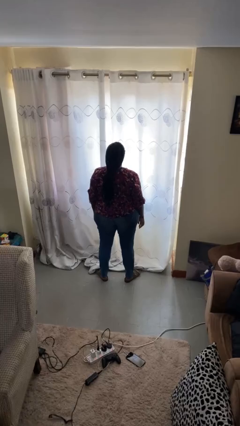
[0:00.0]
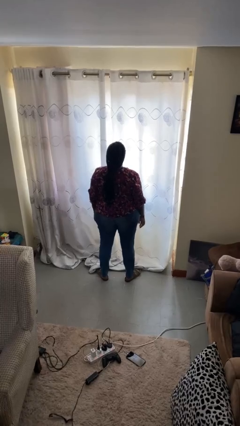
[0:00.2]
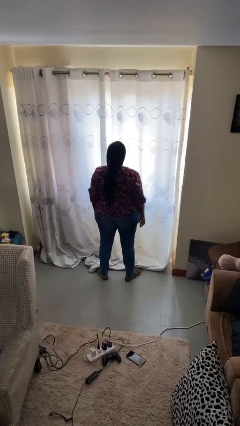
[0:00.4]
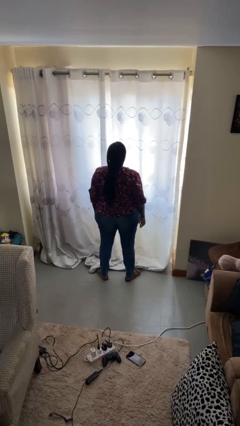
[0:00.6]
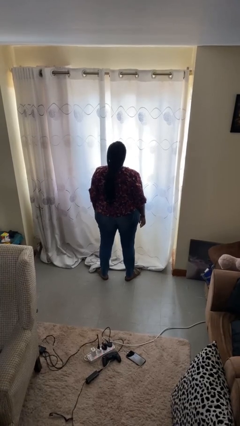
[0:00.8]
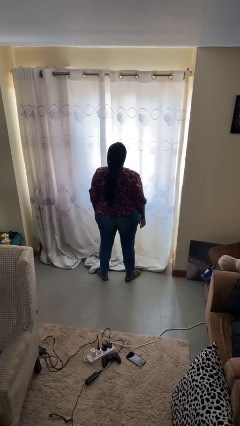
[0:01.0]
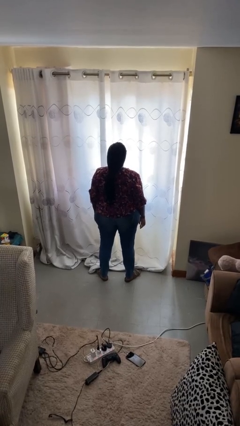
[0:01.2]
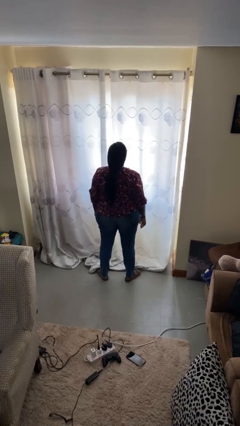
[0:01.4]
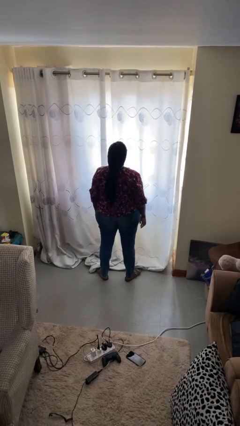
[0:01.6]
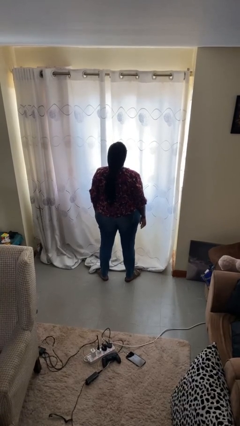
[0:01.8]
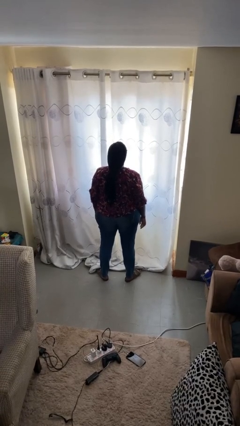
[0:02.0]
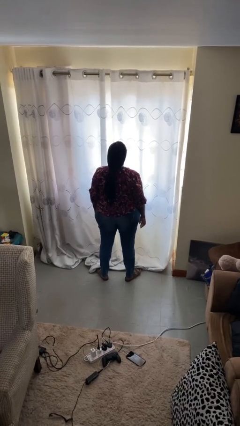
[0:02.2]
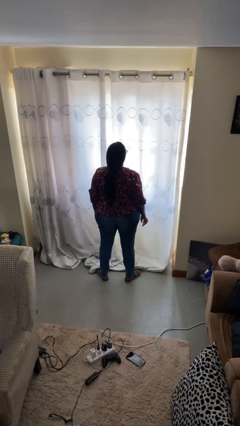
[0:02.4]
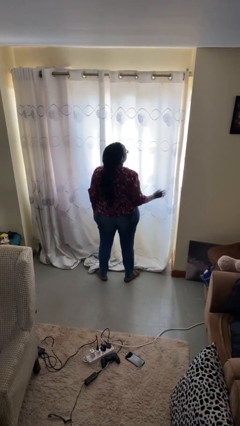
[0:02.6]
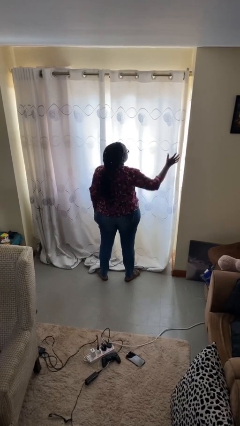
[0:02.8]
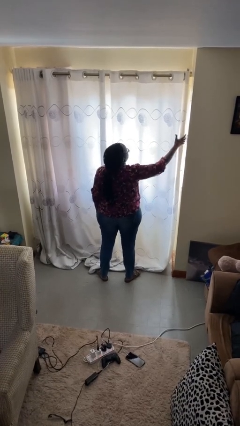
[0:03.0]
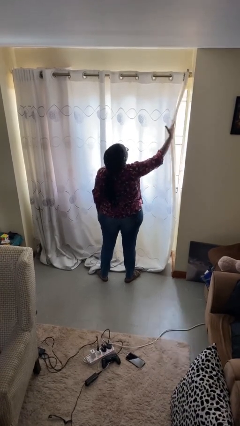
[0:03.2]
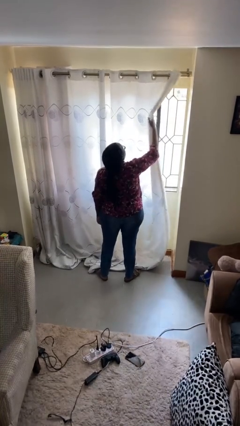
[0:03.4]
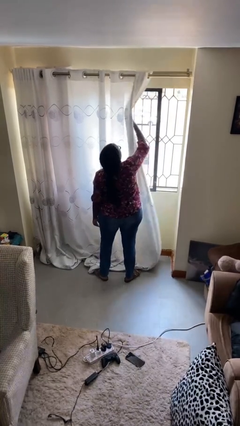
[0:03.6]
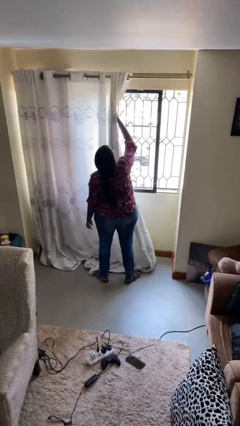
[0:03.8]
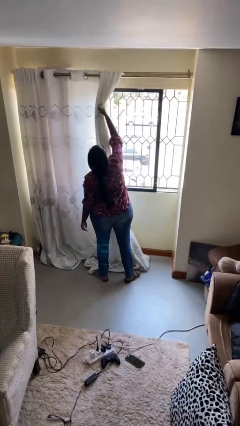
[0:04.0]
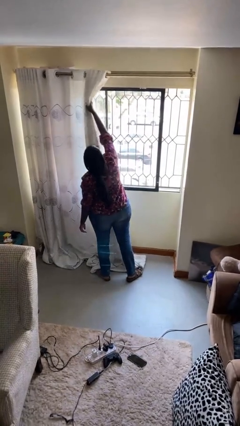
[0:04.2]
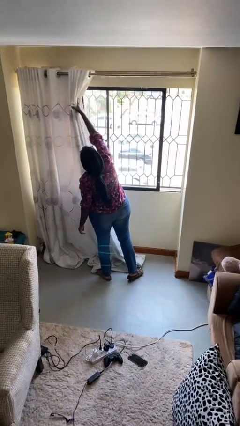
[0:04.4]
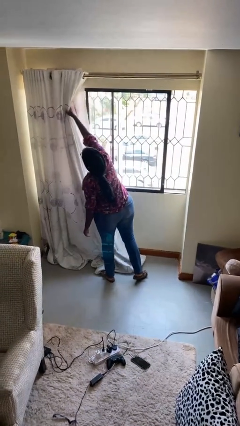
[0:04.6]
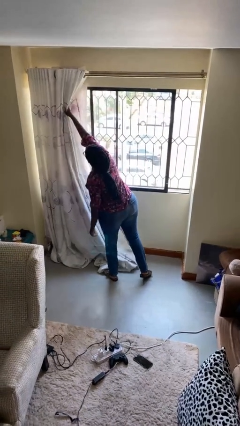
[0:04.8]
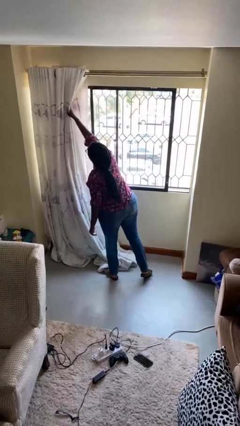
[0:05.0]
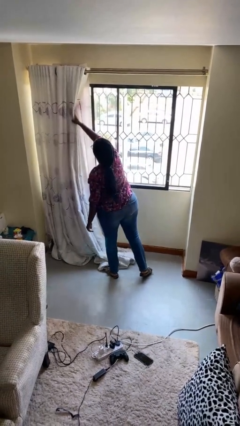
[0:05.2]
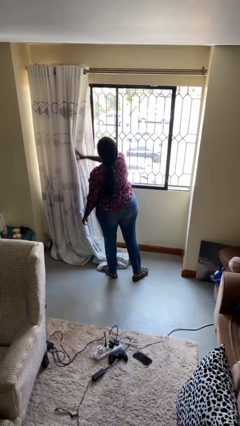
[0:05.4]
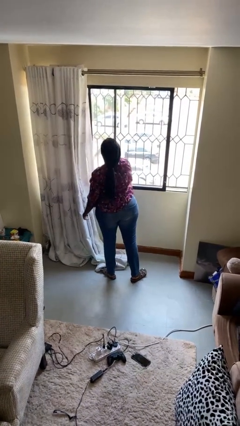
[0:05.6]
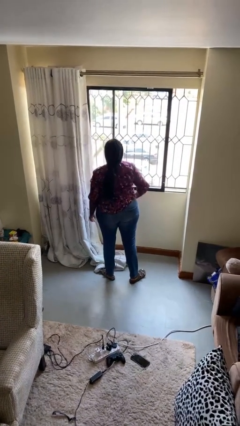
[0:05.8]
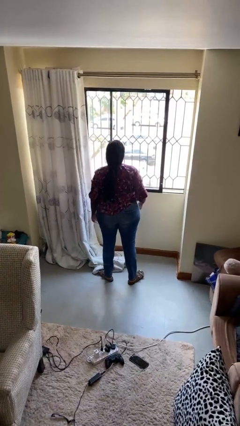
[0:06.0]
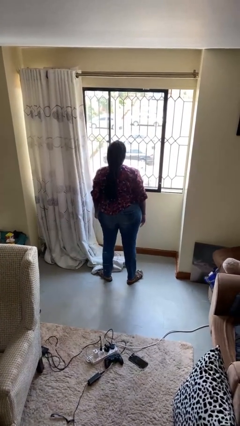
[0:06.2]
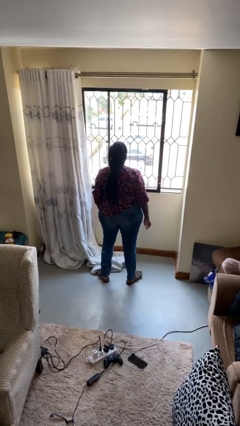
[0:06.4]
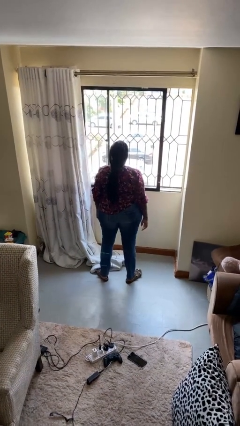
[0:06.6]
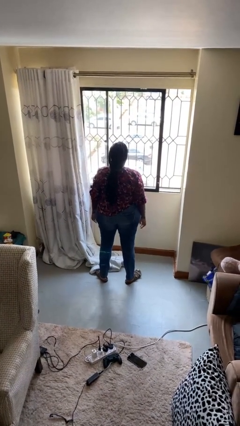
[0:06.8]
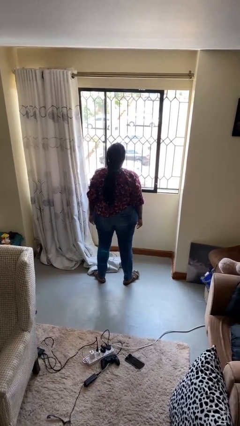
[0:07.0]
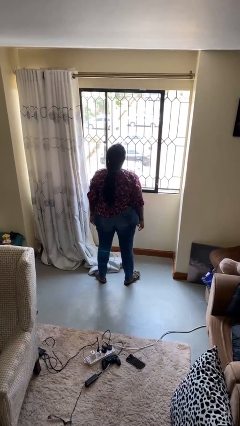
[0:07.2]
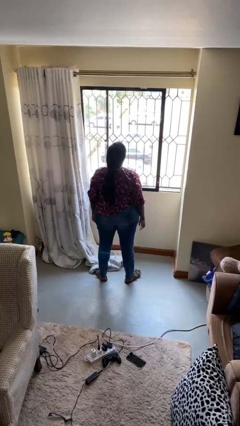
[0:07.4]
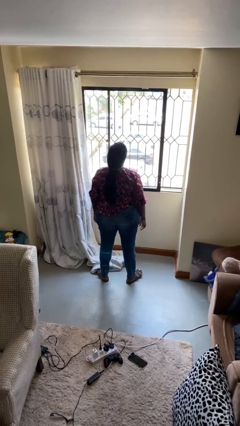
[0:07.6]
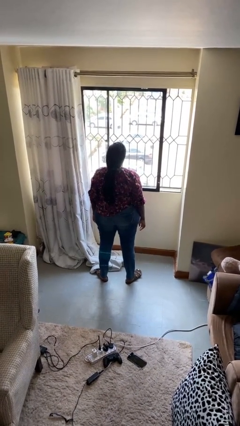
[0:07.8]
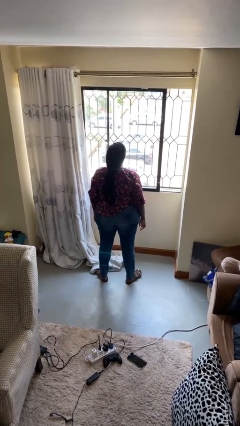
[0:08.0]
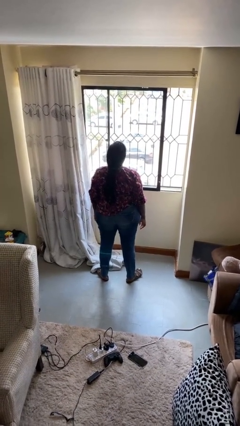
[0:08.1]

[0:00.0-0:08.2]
person opens curtains

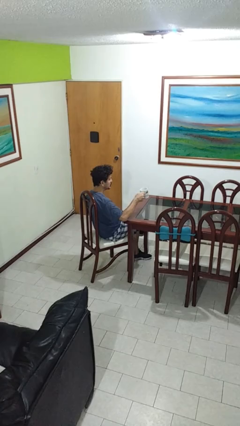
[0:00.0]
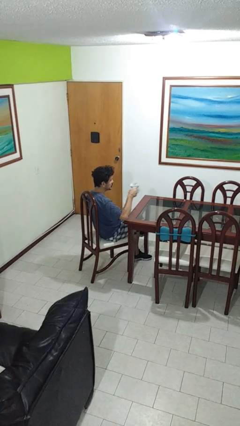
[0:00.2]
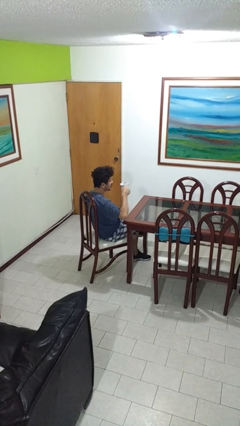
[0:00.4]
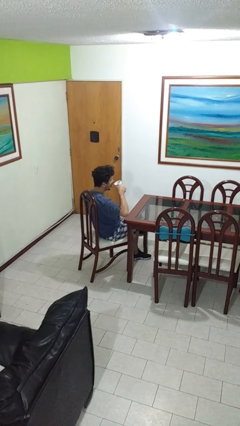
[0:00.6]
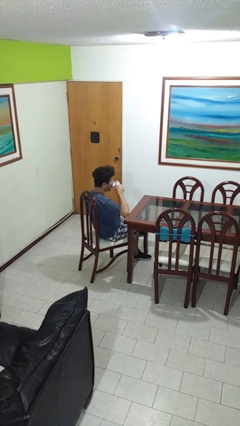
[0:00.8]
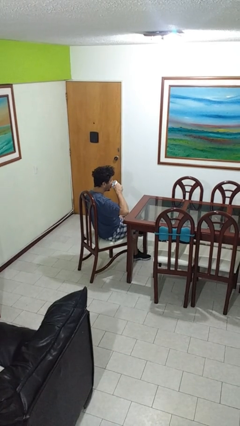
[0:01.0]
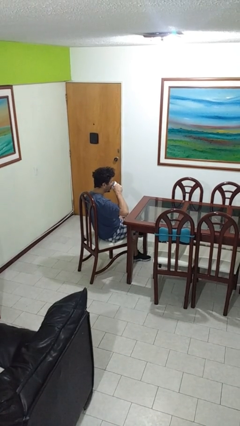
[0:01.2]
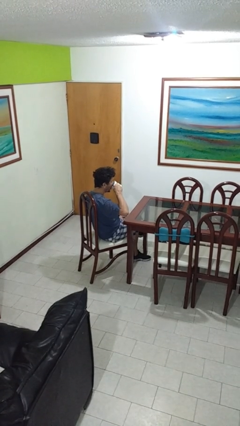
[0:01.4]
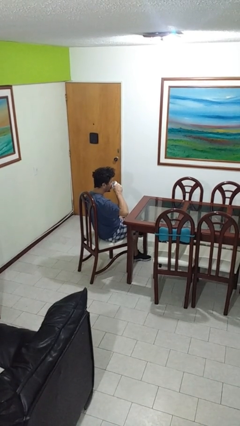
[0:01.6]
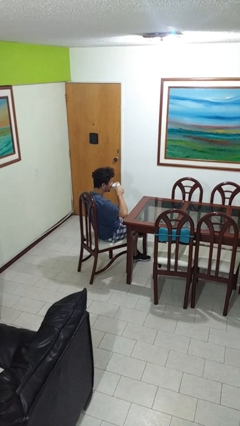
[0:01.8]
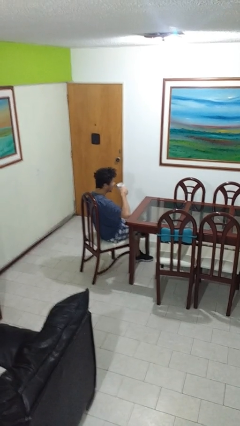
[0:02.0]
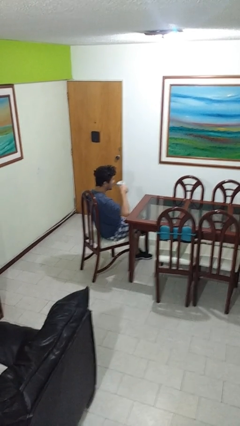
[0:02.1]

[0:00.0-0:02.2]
person drinks from mug

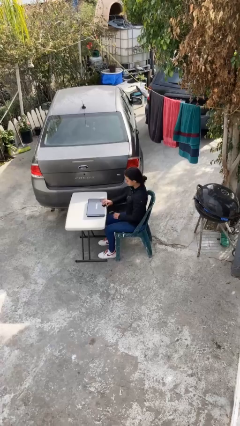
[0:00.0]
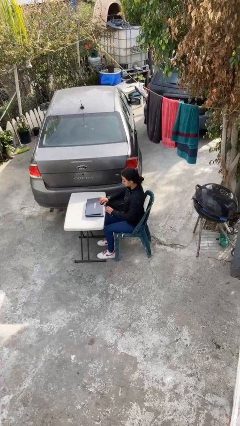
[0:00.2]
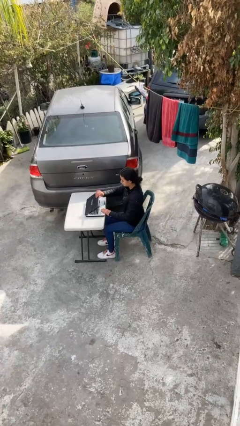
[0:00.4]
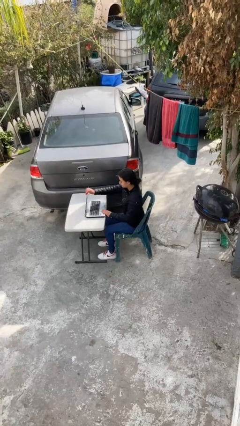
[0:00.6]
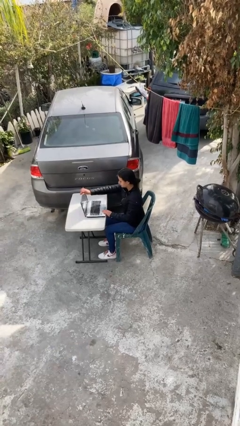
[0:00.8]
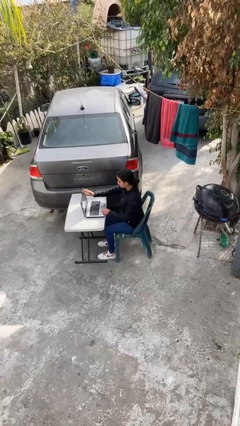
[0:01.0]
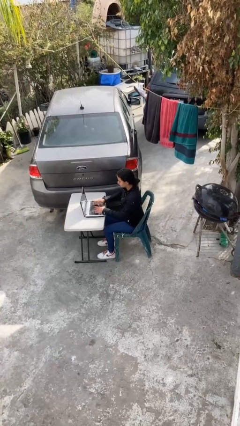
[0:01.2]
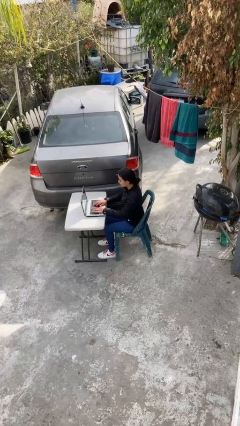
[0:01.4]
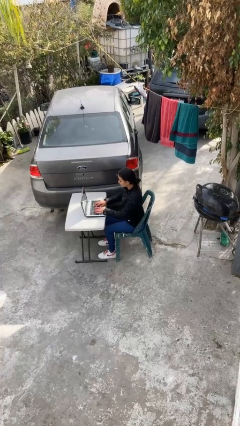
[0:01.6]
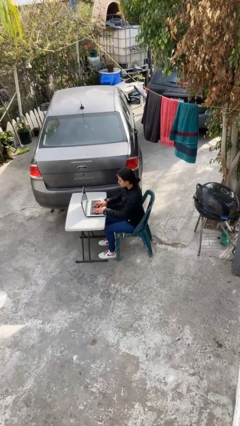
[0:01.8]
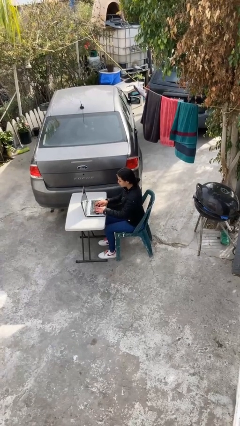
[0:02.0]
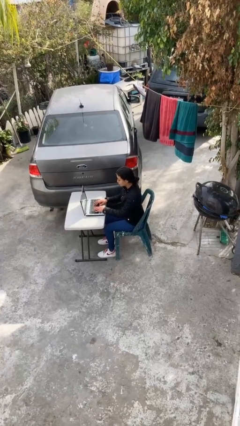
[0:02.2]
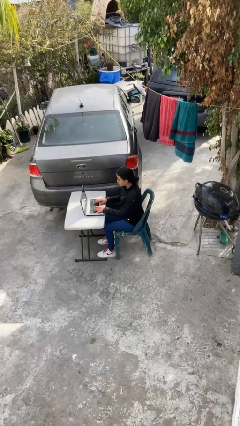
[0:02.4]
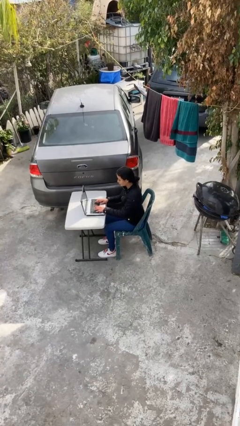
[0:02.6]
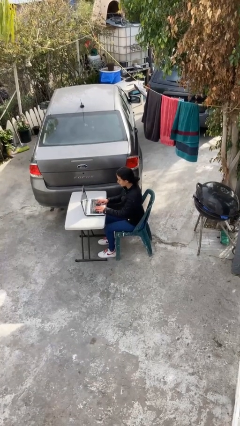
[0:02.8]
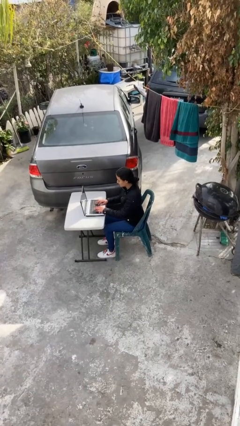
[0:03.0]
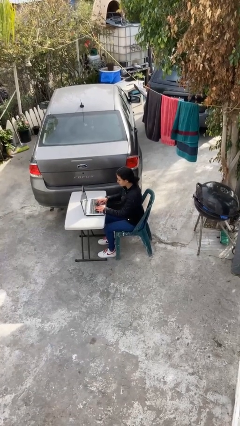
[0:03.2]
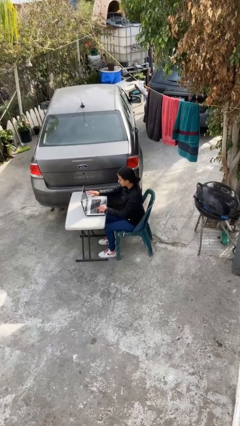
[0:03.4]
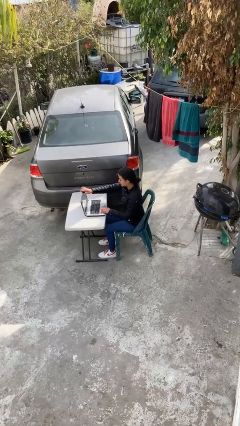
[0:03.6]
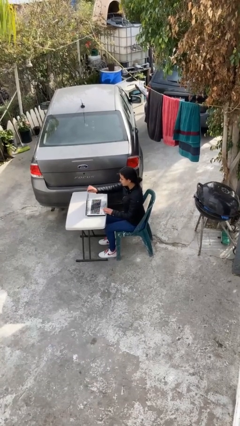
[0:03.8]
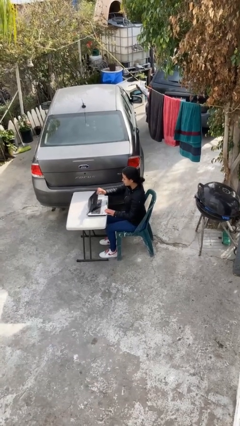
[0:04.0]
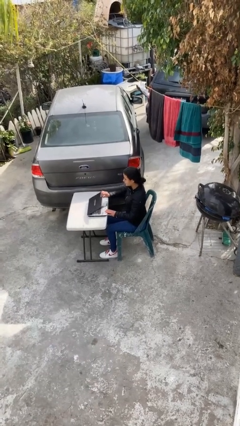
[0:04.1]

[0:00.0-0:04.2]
person interacts with laptop

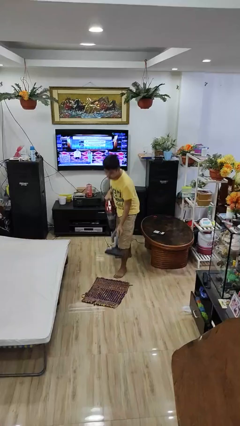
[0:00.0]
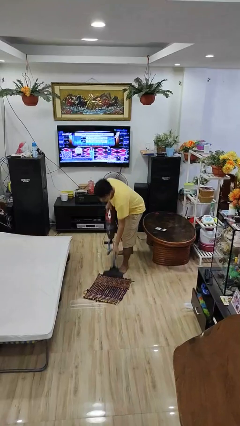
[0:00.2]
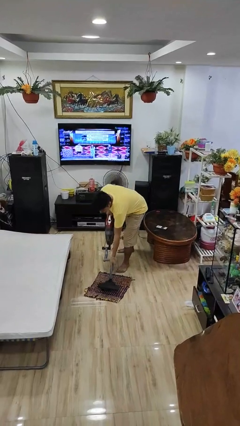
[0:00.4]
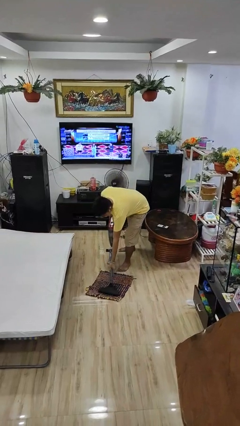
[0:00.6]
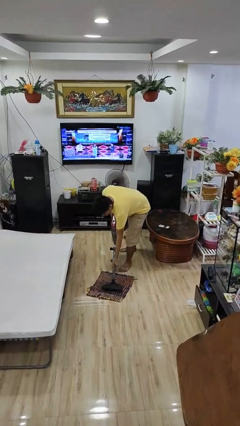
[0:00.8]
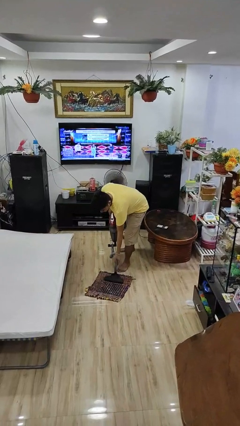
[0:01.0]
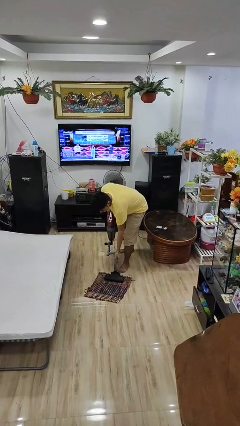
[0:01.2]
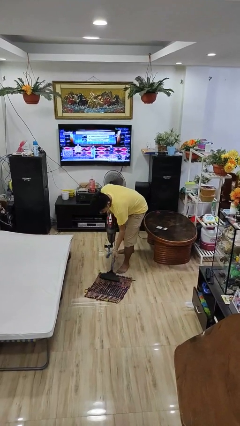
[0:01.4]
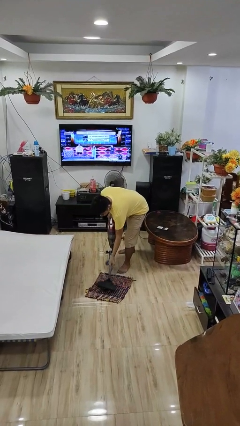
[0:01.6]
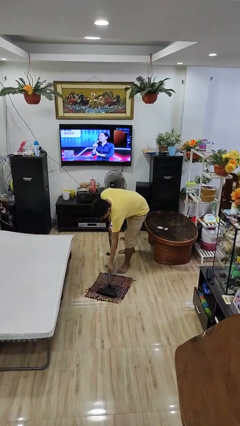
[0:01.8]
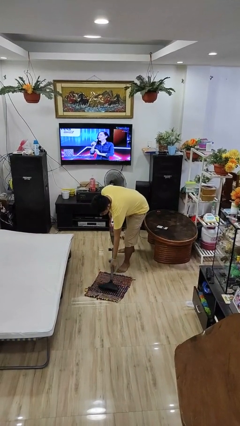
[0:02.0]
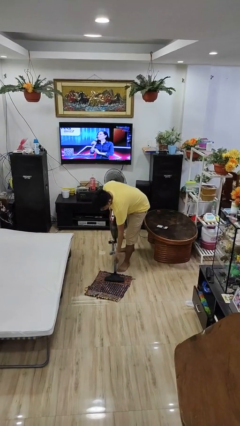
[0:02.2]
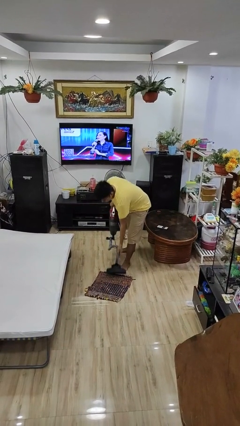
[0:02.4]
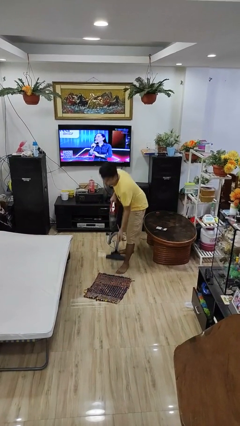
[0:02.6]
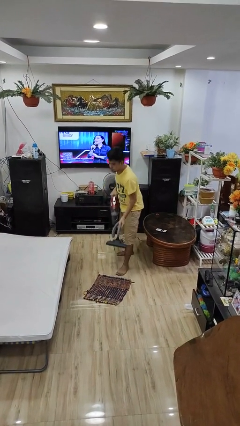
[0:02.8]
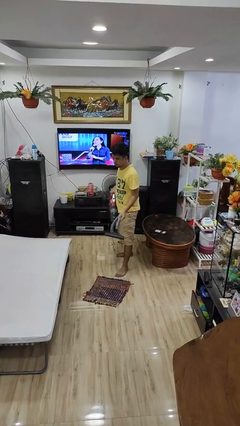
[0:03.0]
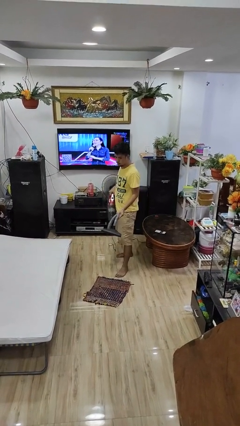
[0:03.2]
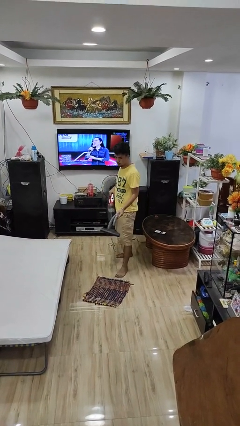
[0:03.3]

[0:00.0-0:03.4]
person vacuums carpet
